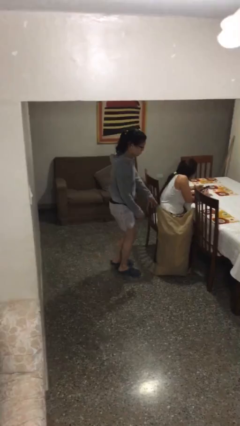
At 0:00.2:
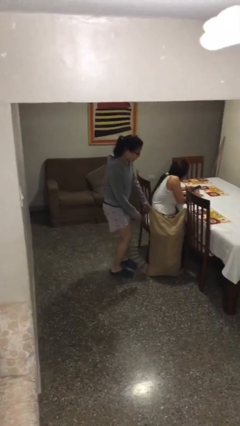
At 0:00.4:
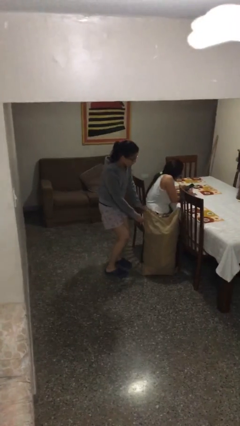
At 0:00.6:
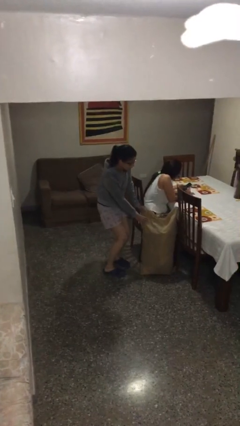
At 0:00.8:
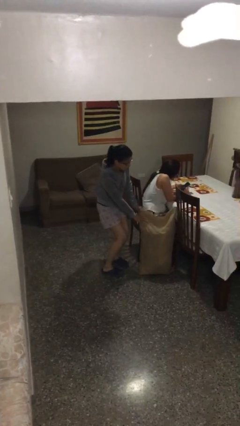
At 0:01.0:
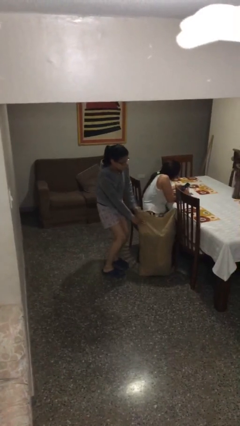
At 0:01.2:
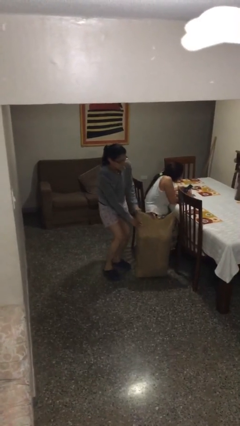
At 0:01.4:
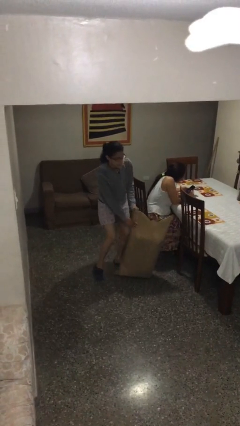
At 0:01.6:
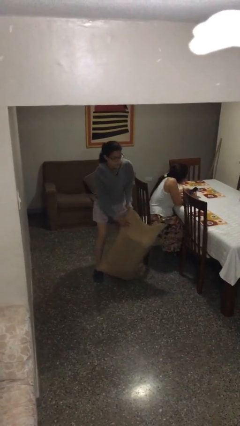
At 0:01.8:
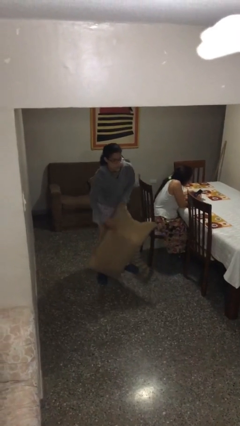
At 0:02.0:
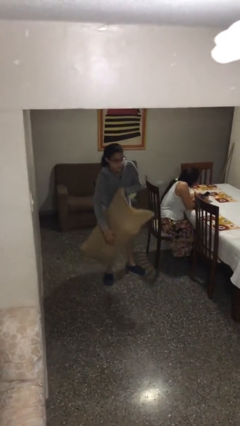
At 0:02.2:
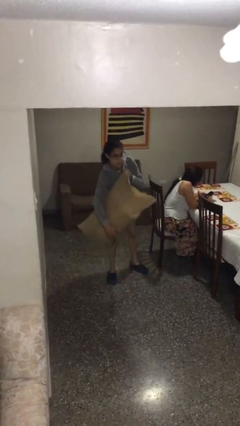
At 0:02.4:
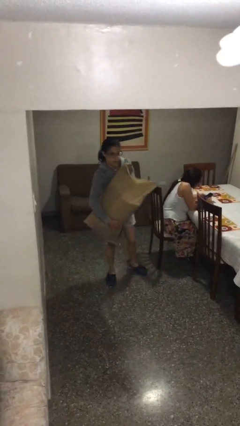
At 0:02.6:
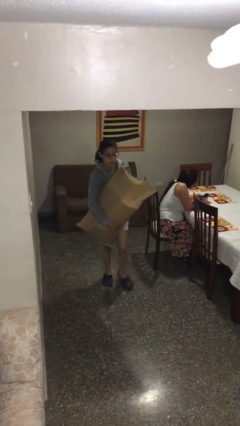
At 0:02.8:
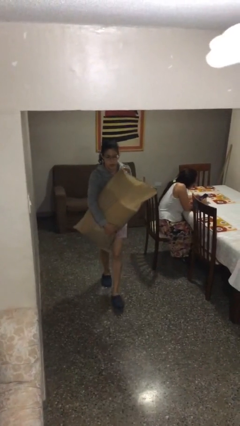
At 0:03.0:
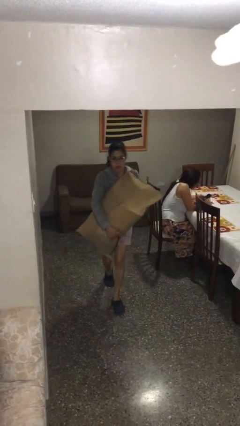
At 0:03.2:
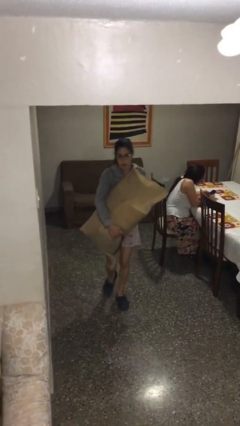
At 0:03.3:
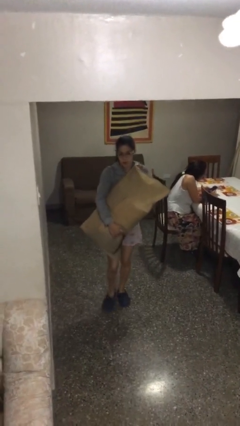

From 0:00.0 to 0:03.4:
person steals object from person

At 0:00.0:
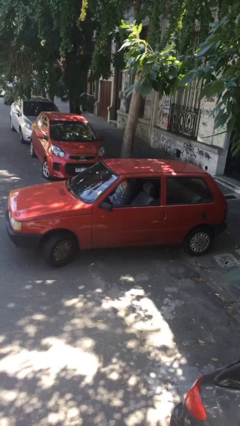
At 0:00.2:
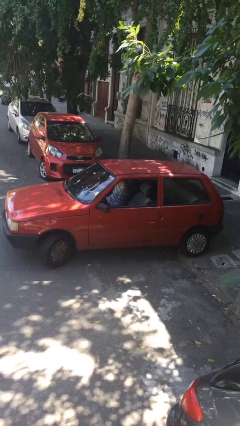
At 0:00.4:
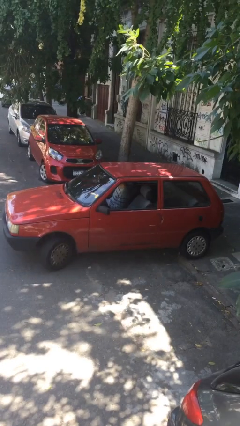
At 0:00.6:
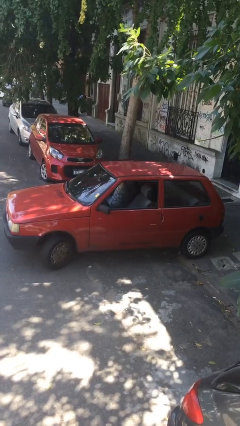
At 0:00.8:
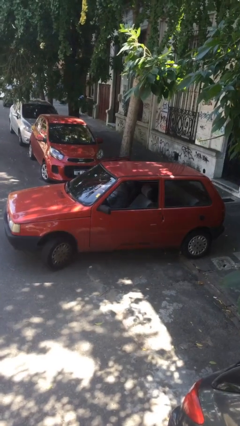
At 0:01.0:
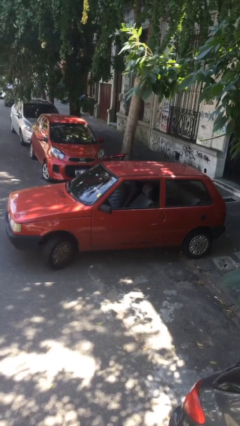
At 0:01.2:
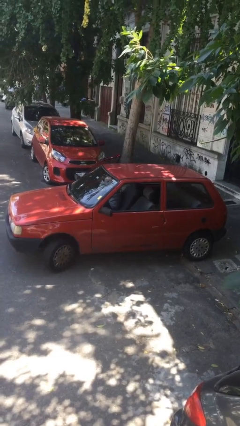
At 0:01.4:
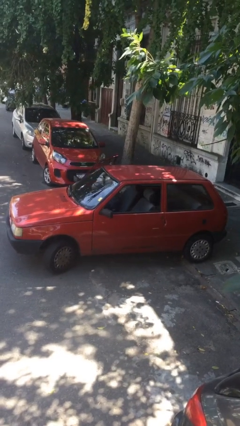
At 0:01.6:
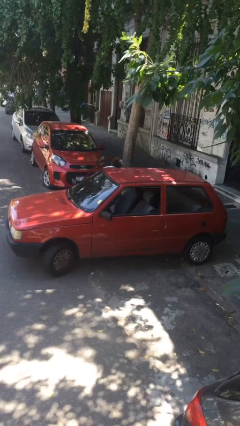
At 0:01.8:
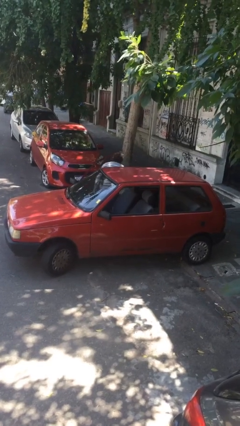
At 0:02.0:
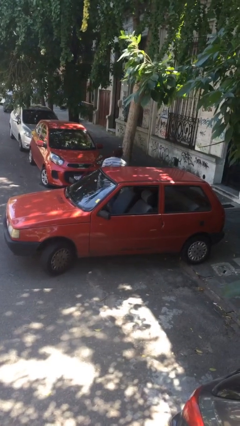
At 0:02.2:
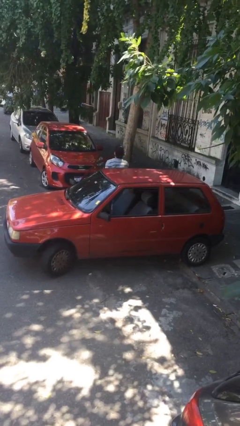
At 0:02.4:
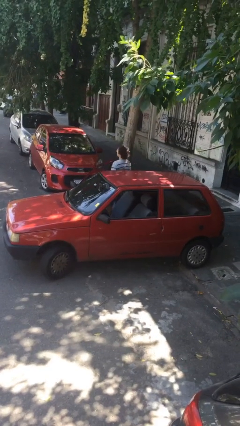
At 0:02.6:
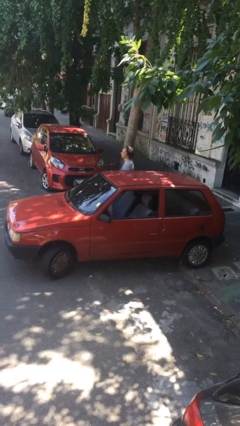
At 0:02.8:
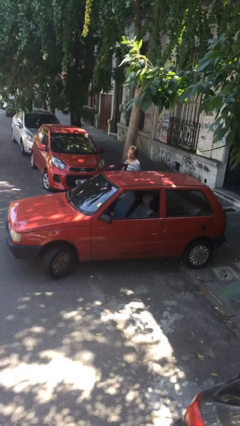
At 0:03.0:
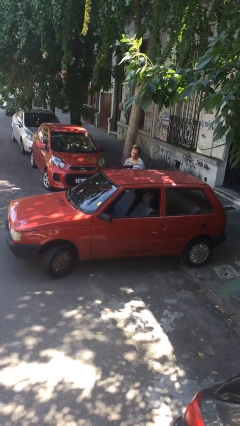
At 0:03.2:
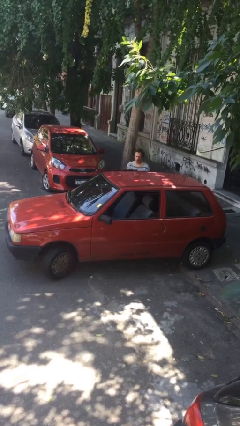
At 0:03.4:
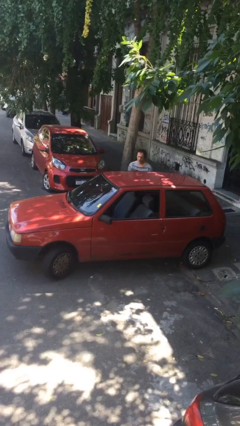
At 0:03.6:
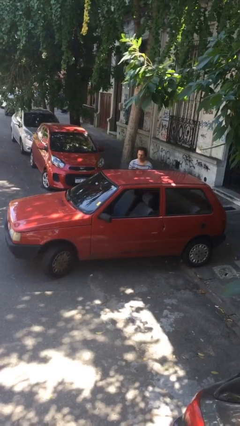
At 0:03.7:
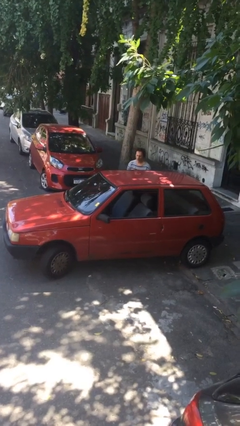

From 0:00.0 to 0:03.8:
car drops off person

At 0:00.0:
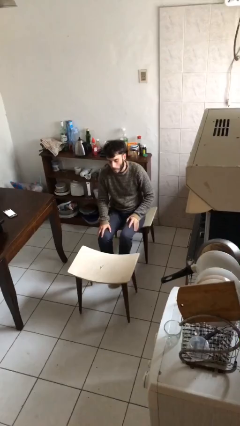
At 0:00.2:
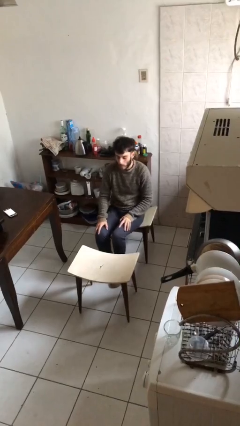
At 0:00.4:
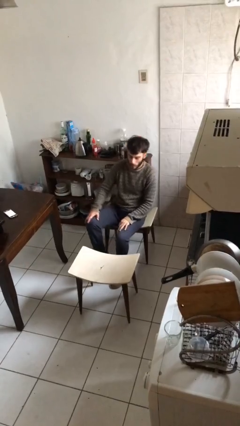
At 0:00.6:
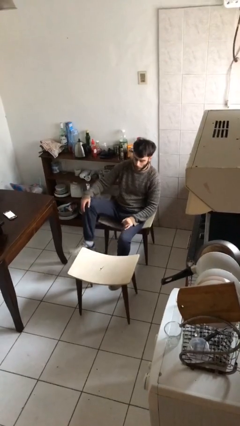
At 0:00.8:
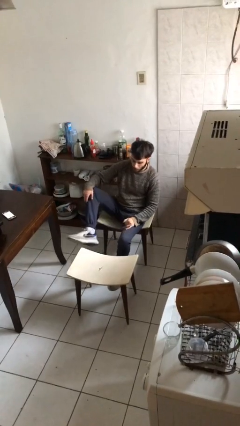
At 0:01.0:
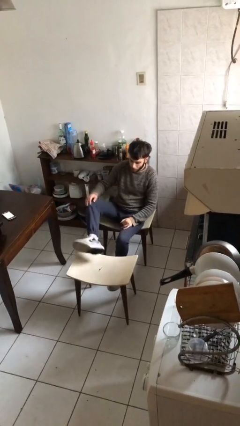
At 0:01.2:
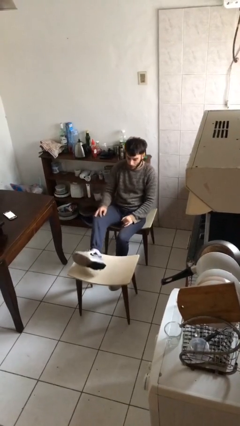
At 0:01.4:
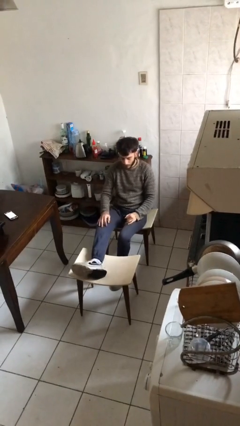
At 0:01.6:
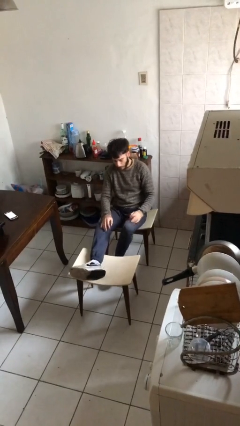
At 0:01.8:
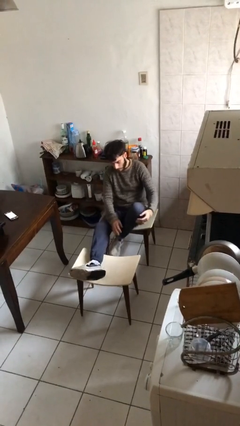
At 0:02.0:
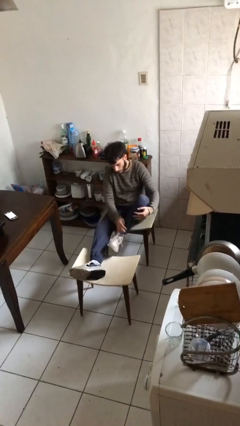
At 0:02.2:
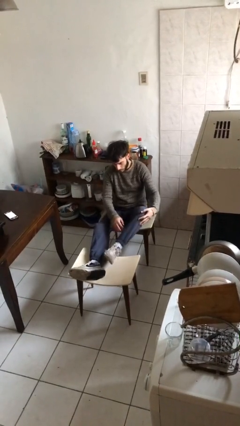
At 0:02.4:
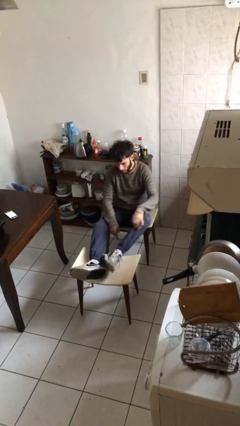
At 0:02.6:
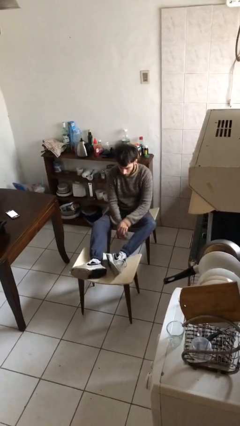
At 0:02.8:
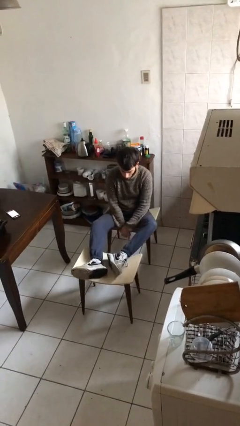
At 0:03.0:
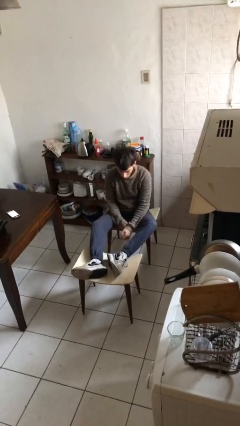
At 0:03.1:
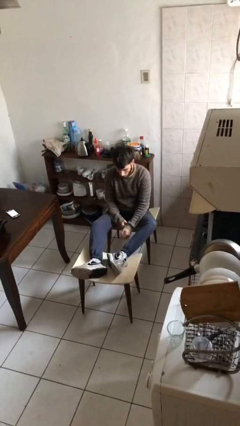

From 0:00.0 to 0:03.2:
person puts feet up

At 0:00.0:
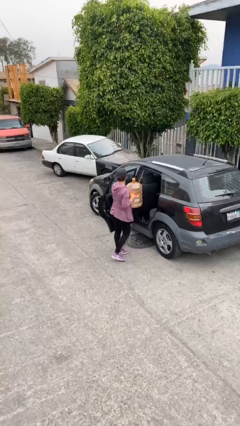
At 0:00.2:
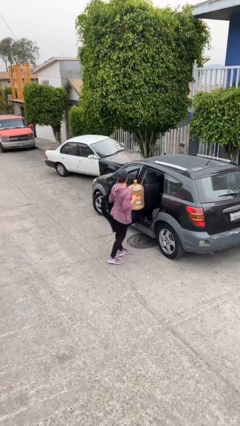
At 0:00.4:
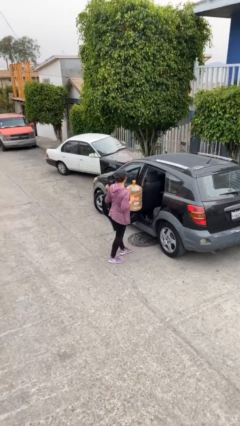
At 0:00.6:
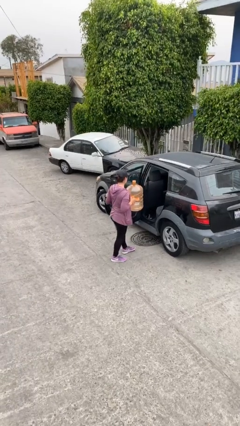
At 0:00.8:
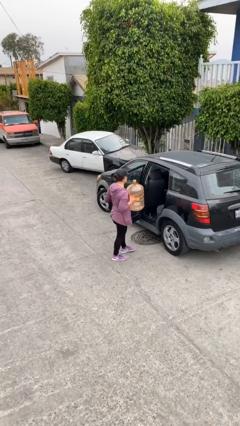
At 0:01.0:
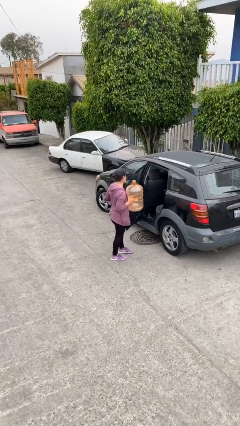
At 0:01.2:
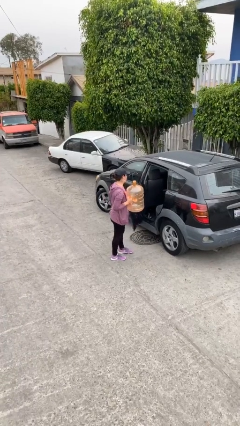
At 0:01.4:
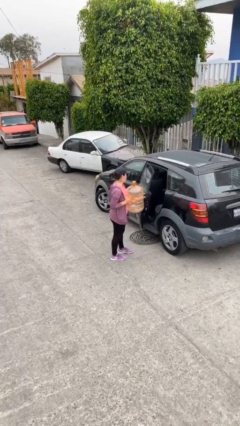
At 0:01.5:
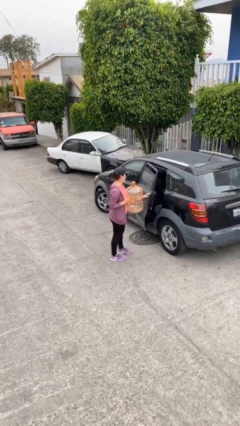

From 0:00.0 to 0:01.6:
person closes car door

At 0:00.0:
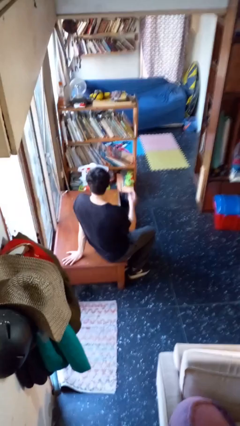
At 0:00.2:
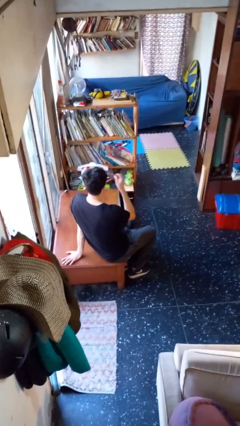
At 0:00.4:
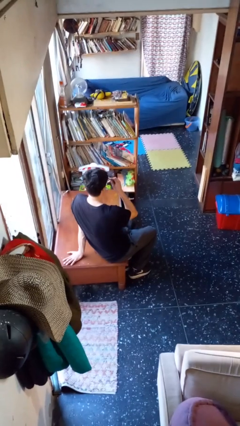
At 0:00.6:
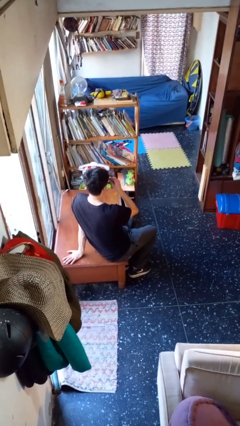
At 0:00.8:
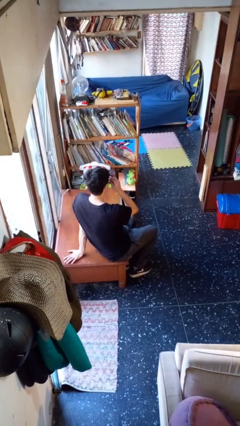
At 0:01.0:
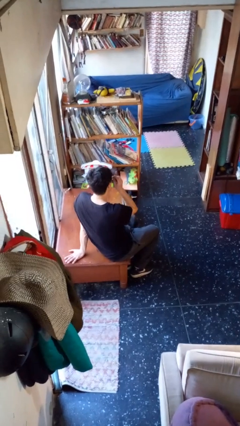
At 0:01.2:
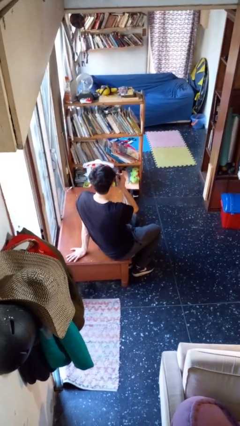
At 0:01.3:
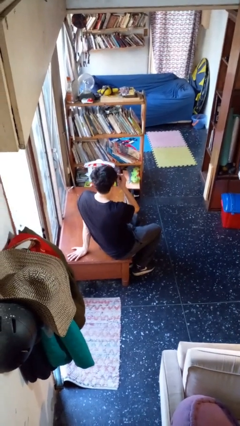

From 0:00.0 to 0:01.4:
person puts on glasses

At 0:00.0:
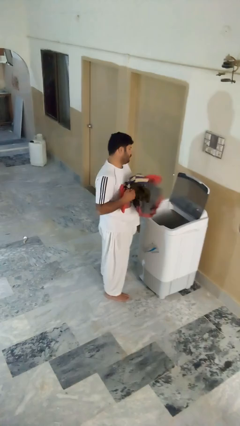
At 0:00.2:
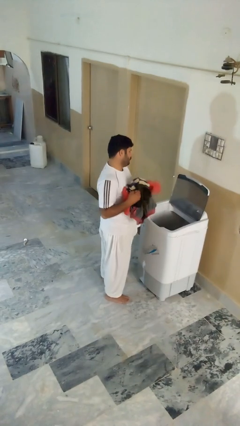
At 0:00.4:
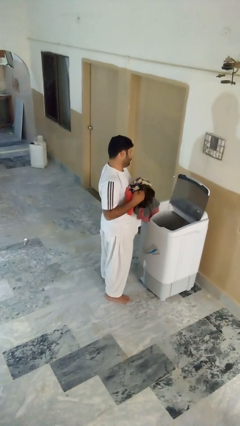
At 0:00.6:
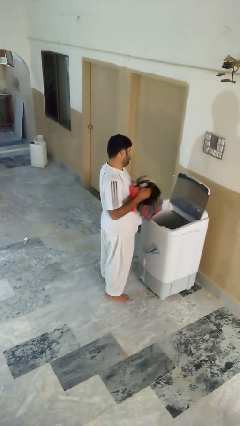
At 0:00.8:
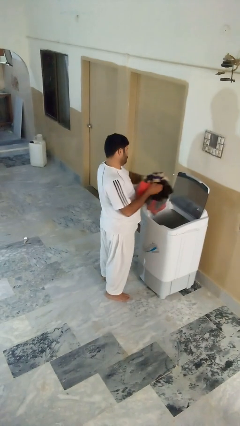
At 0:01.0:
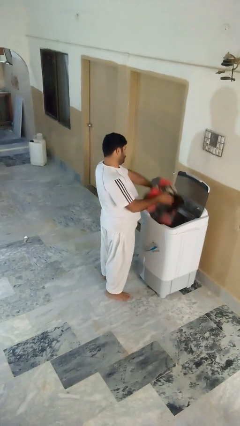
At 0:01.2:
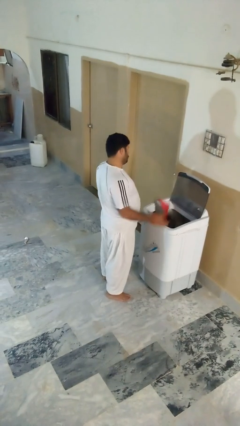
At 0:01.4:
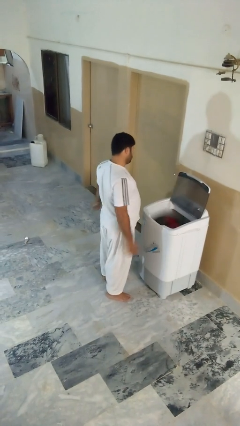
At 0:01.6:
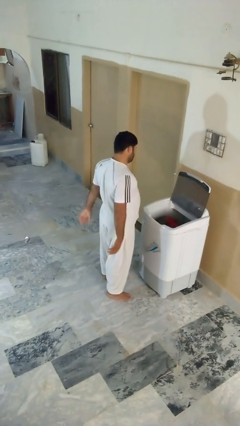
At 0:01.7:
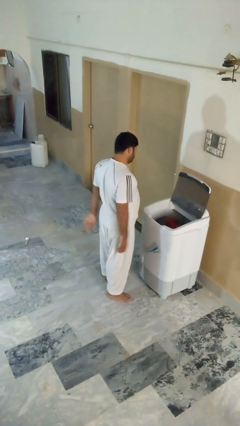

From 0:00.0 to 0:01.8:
person loads clotheswasher

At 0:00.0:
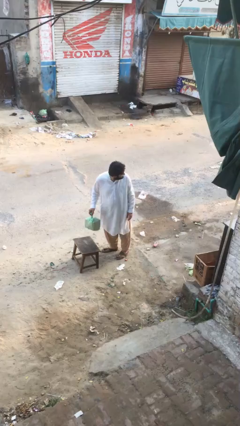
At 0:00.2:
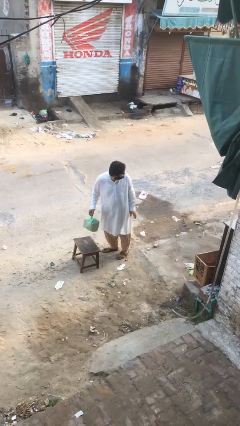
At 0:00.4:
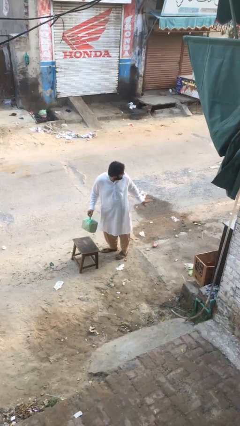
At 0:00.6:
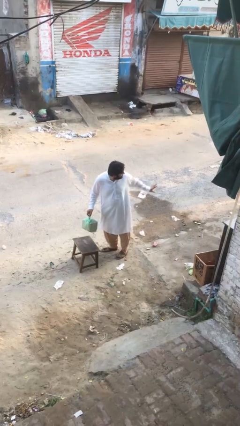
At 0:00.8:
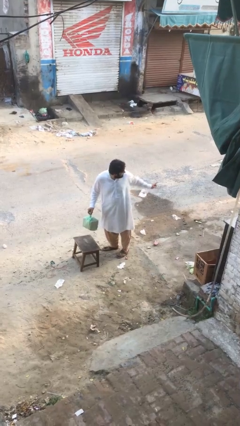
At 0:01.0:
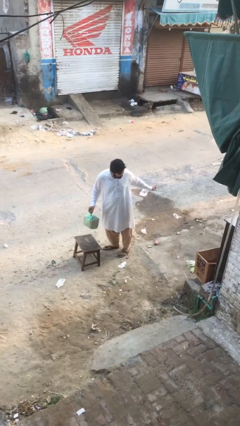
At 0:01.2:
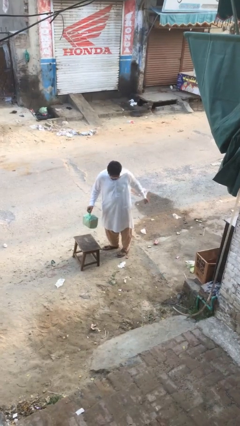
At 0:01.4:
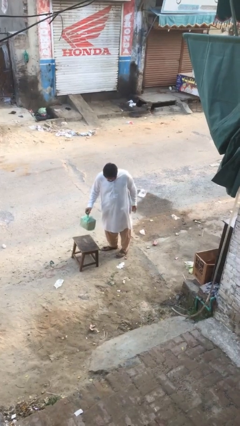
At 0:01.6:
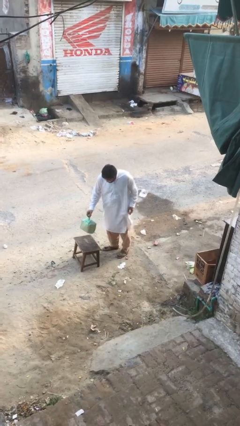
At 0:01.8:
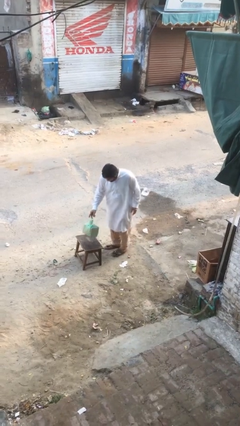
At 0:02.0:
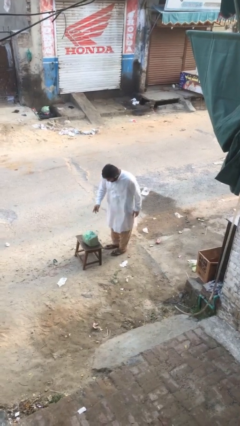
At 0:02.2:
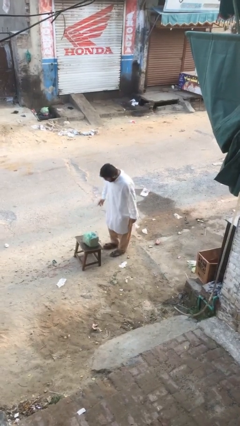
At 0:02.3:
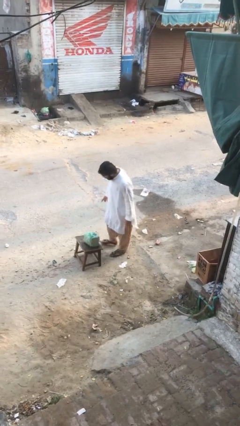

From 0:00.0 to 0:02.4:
person puts down object on table
